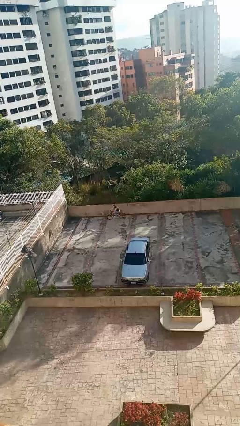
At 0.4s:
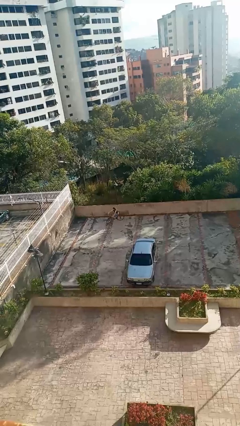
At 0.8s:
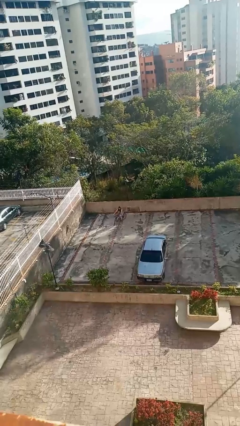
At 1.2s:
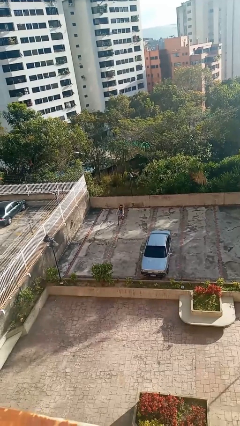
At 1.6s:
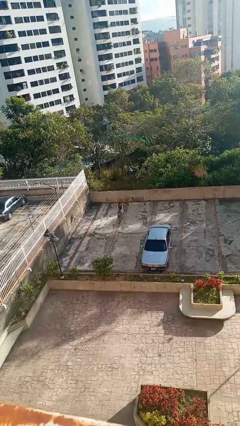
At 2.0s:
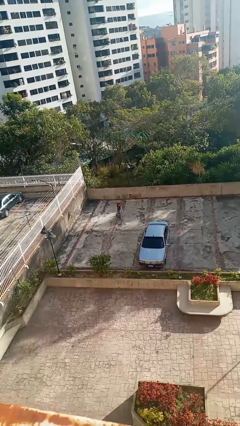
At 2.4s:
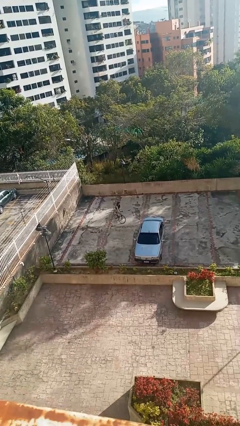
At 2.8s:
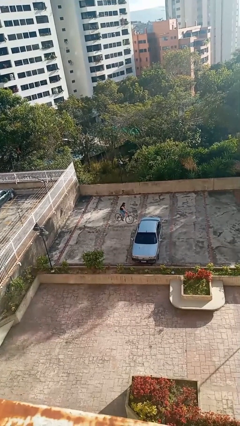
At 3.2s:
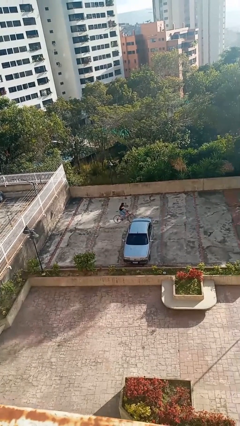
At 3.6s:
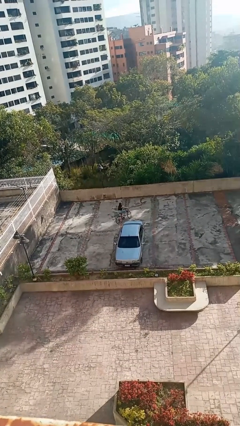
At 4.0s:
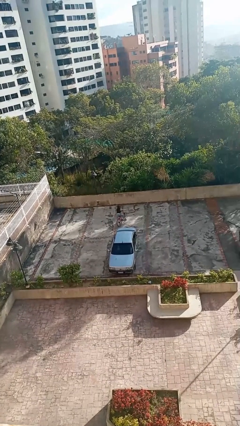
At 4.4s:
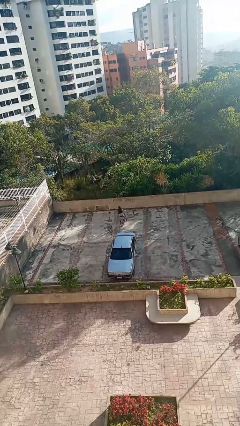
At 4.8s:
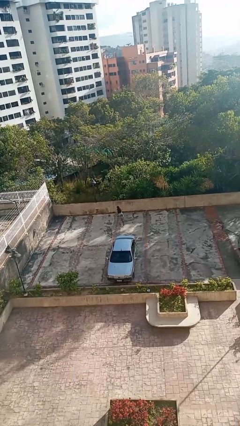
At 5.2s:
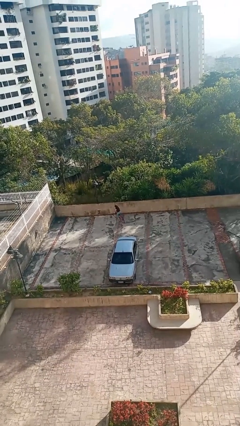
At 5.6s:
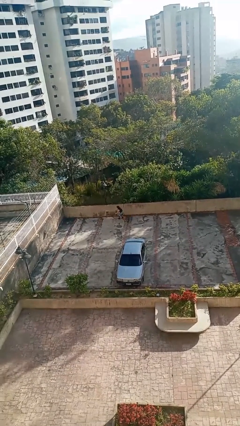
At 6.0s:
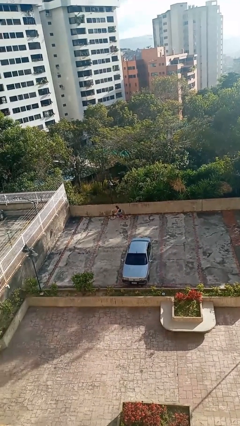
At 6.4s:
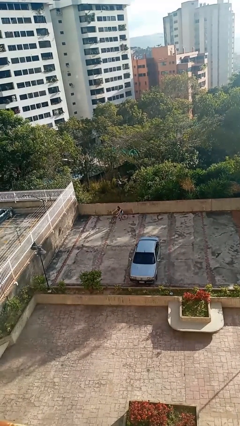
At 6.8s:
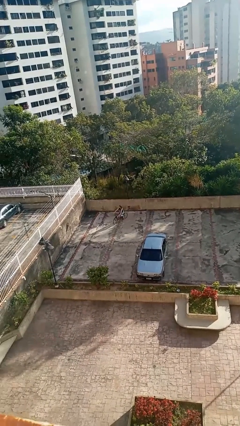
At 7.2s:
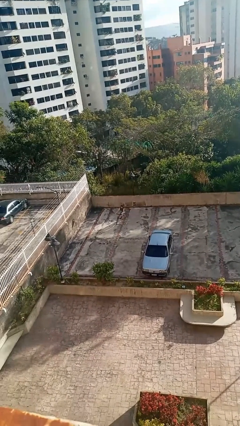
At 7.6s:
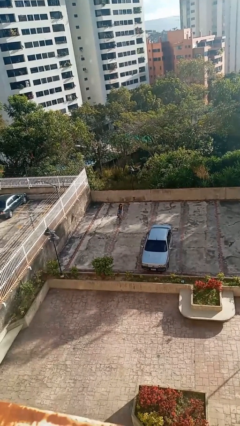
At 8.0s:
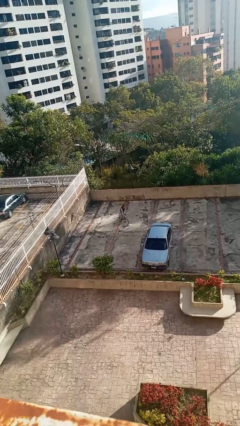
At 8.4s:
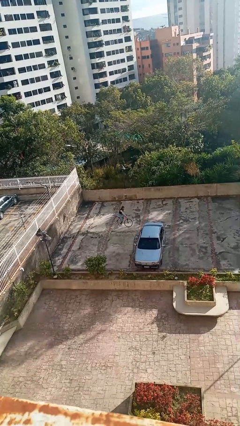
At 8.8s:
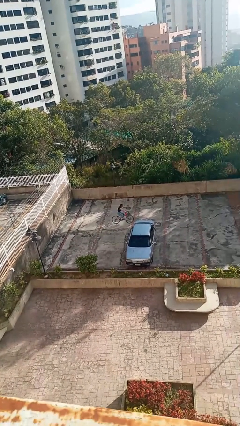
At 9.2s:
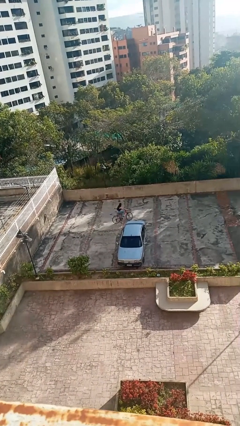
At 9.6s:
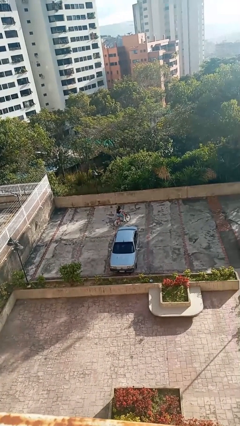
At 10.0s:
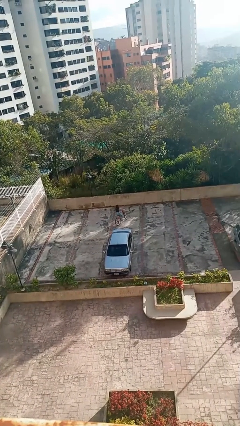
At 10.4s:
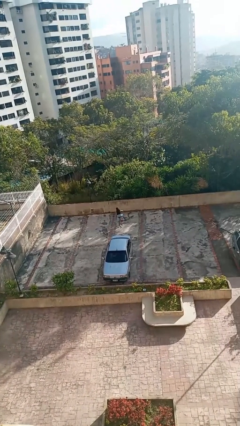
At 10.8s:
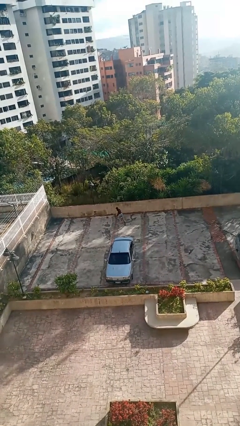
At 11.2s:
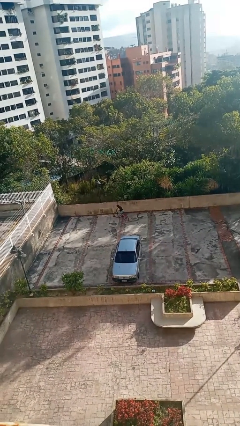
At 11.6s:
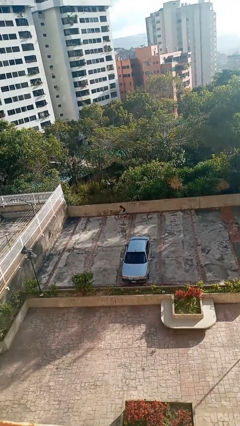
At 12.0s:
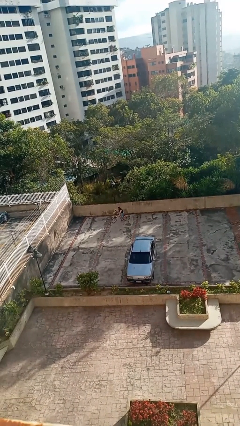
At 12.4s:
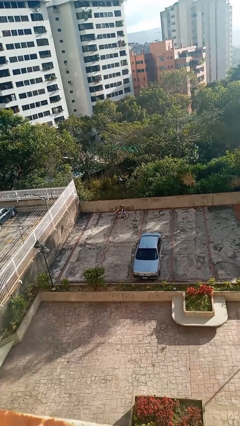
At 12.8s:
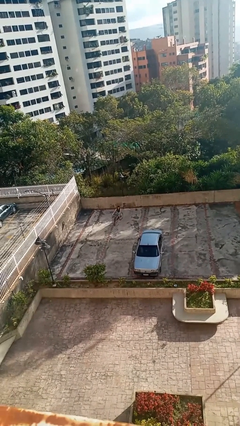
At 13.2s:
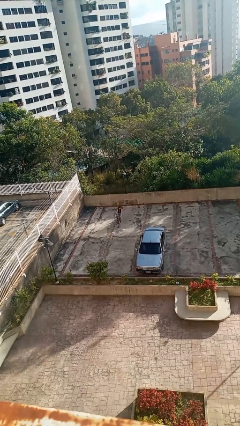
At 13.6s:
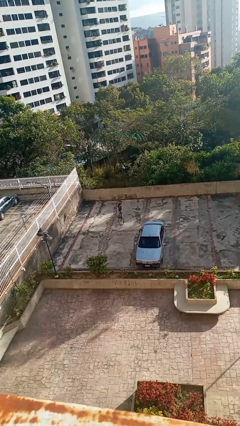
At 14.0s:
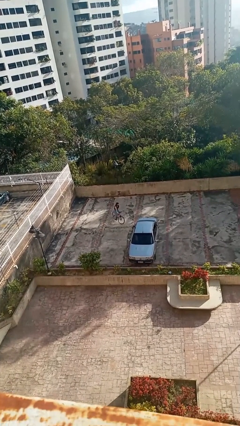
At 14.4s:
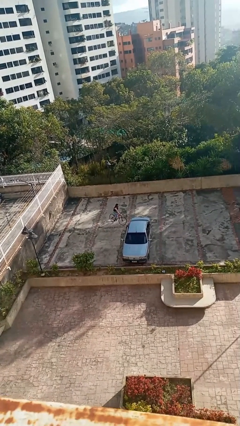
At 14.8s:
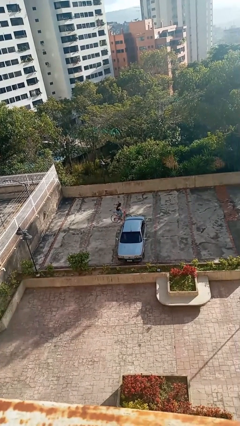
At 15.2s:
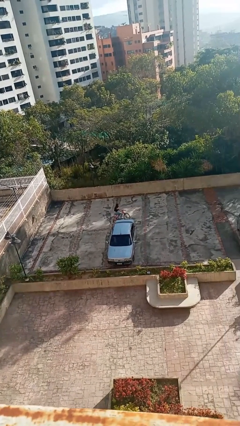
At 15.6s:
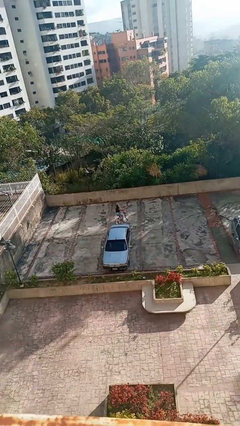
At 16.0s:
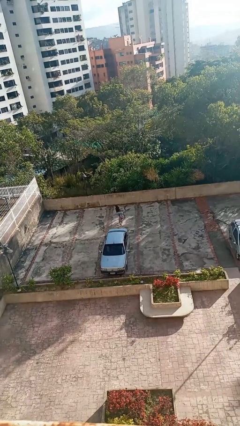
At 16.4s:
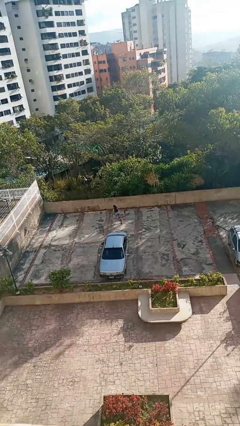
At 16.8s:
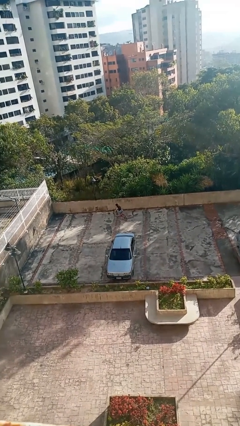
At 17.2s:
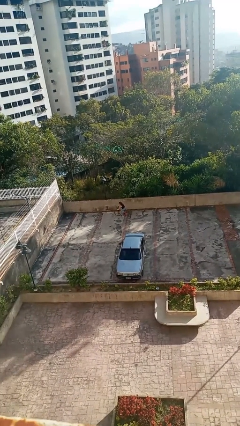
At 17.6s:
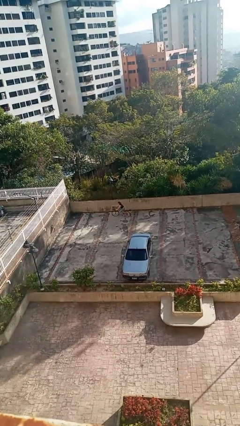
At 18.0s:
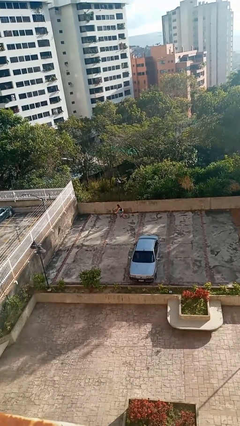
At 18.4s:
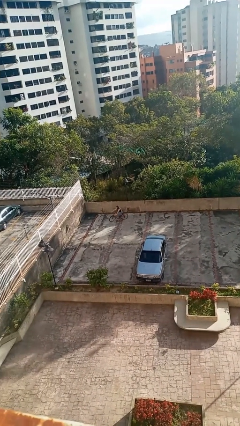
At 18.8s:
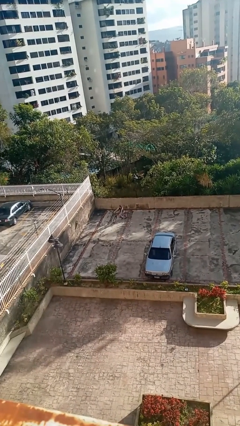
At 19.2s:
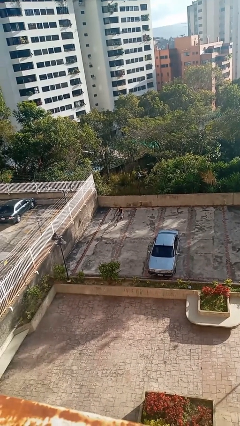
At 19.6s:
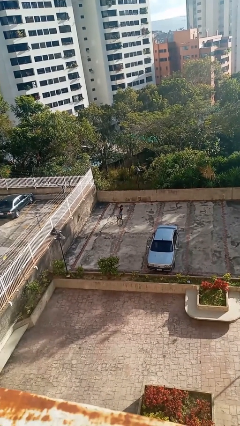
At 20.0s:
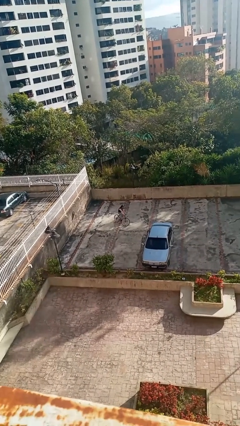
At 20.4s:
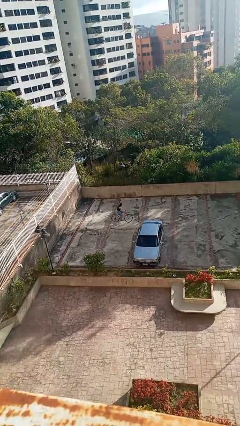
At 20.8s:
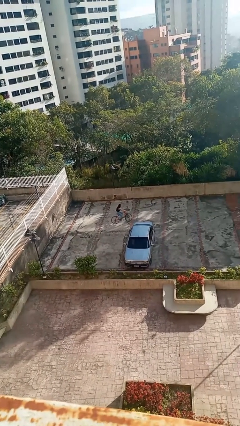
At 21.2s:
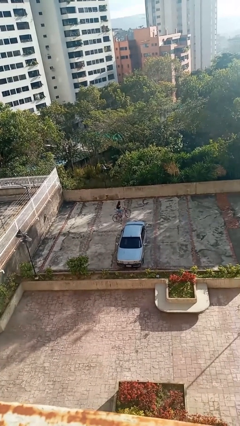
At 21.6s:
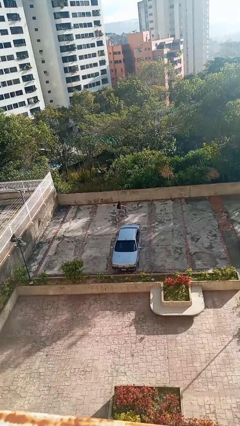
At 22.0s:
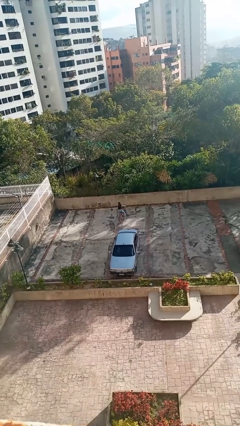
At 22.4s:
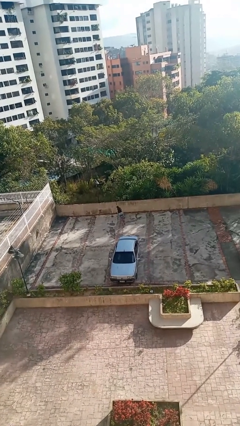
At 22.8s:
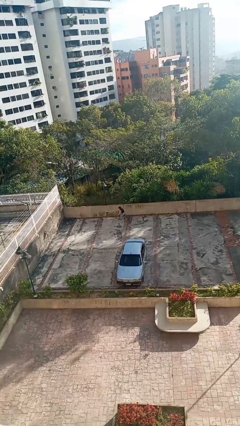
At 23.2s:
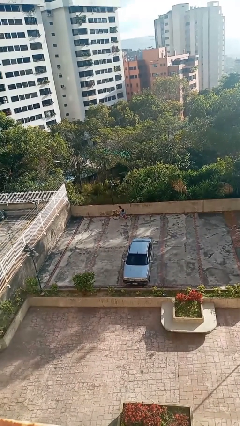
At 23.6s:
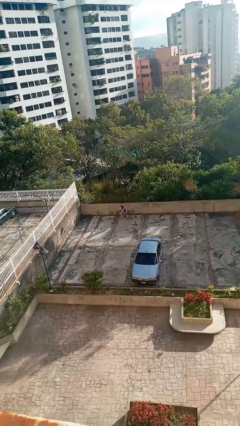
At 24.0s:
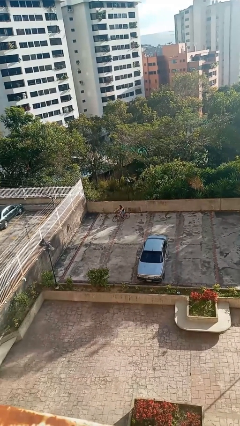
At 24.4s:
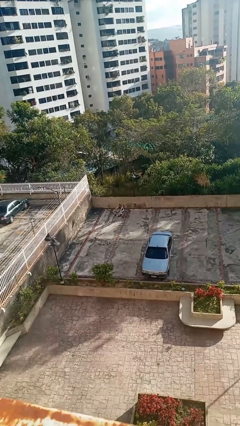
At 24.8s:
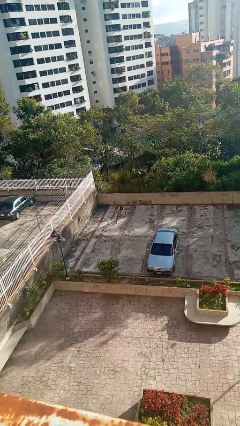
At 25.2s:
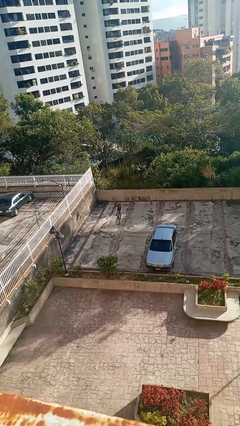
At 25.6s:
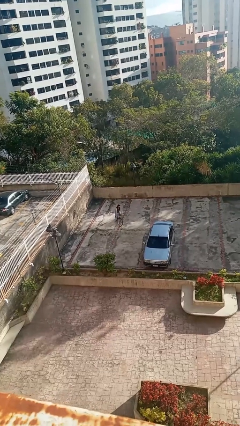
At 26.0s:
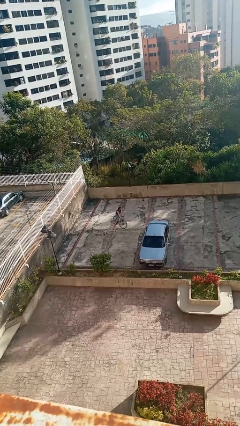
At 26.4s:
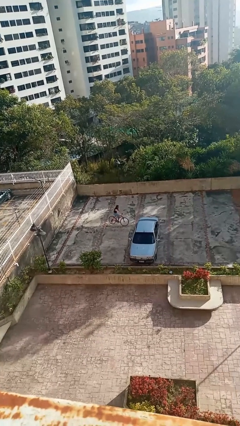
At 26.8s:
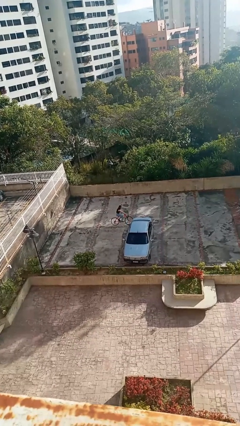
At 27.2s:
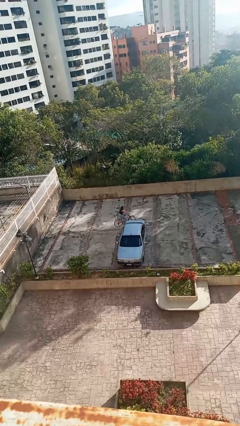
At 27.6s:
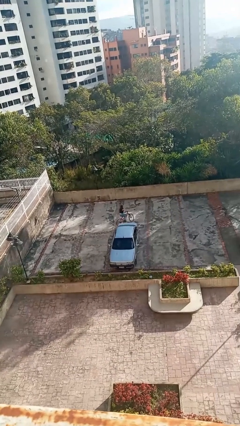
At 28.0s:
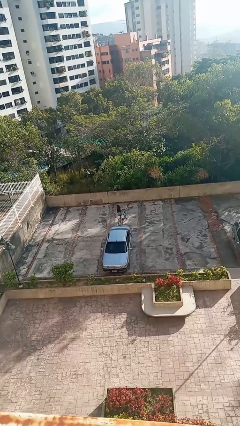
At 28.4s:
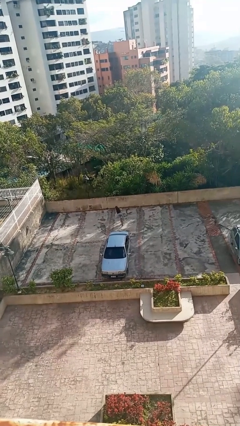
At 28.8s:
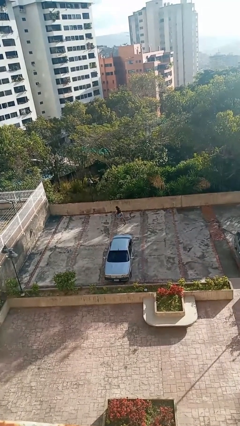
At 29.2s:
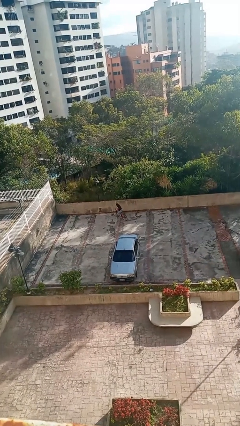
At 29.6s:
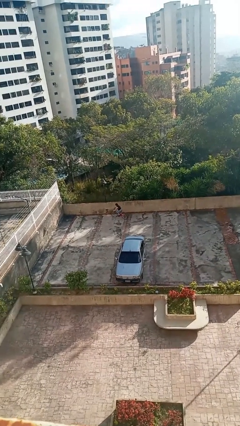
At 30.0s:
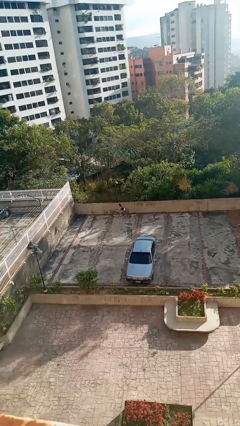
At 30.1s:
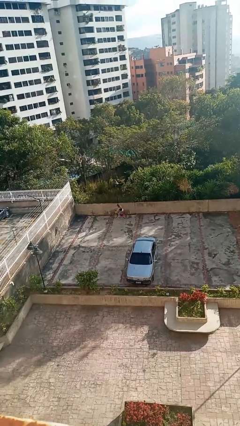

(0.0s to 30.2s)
person rides bicycle

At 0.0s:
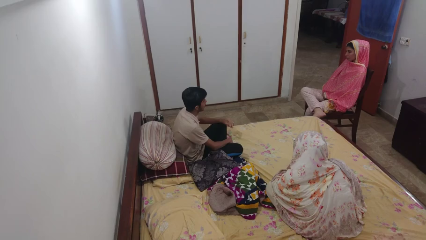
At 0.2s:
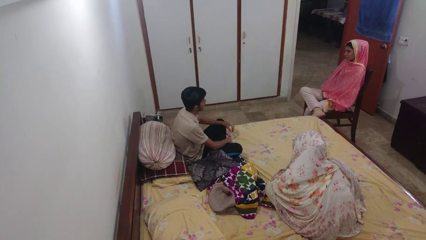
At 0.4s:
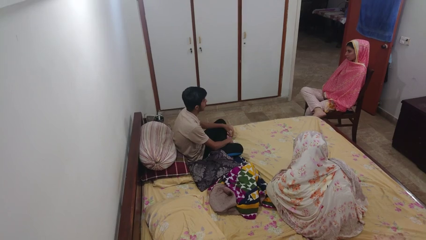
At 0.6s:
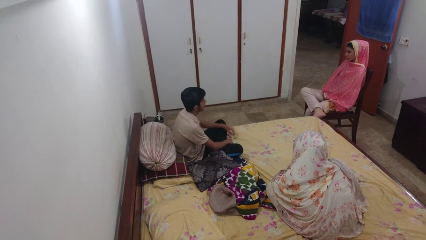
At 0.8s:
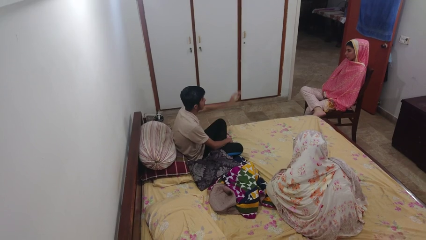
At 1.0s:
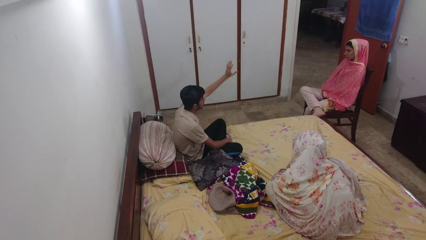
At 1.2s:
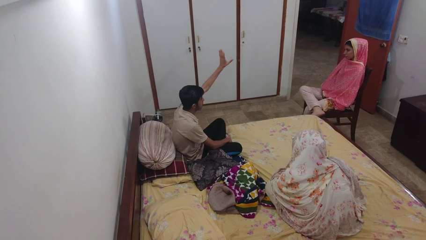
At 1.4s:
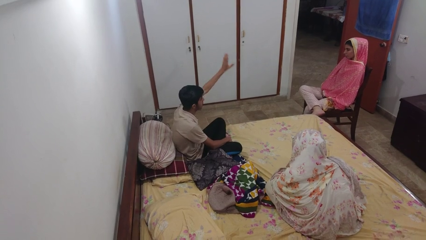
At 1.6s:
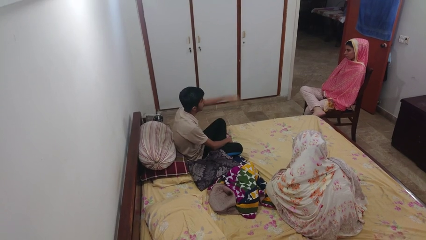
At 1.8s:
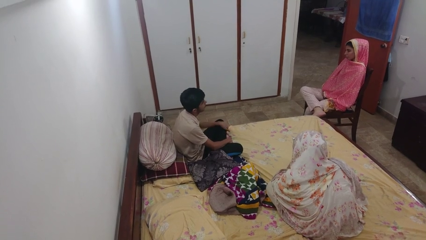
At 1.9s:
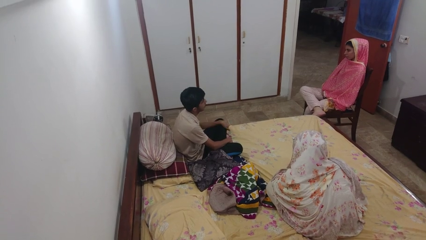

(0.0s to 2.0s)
person waves at person

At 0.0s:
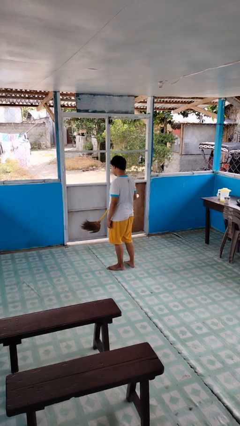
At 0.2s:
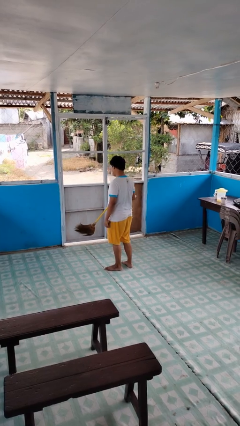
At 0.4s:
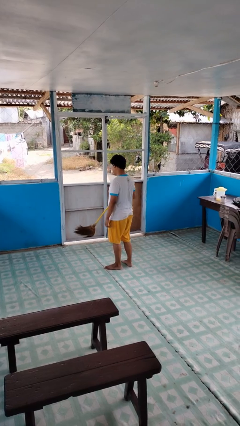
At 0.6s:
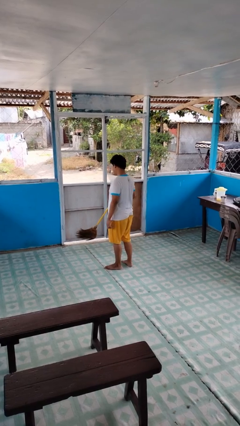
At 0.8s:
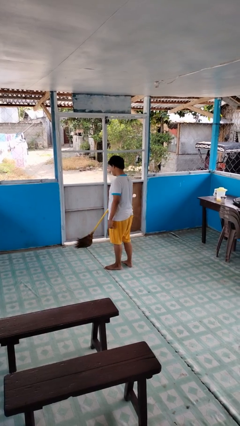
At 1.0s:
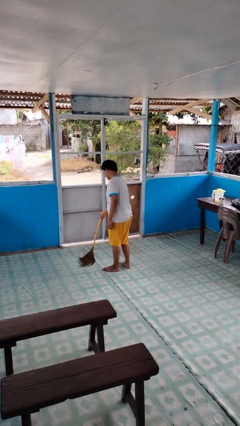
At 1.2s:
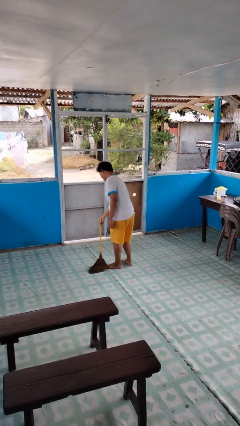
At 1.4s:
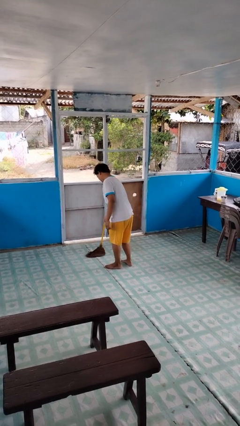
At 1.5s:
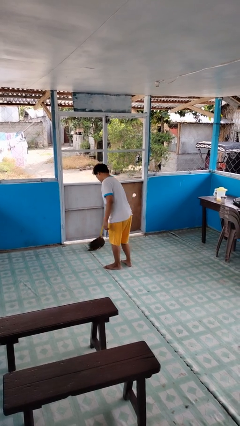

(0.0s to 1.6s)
person sweeps floor
